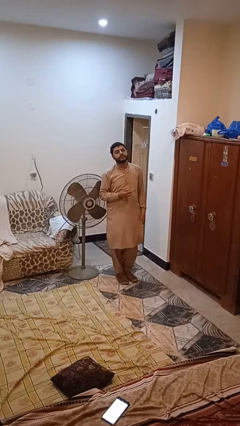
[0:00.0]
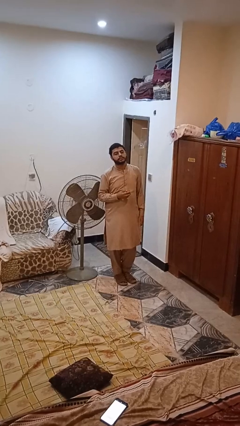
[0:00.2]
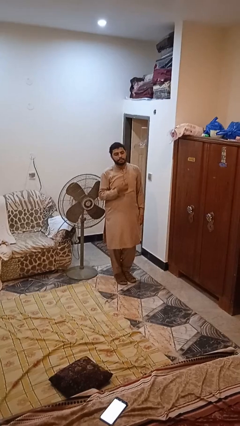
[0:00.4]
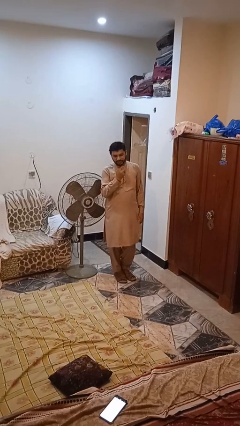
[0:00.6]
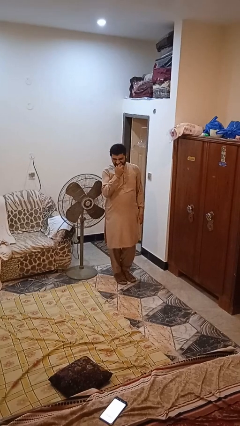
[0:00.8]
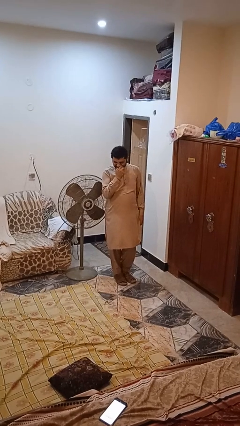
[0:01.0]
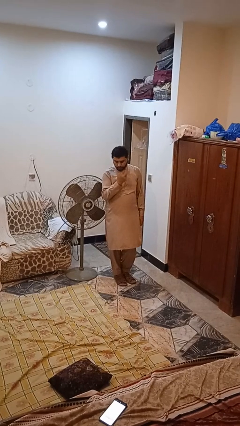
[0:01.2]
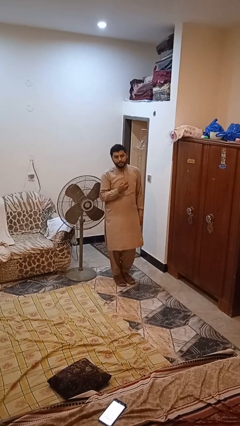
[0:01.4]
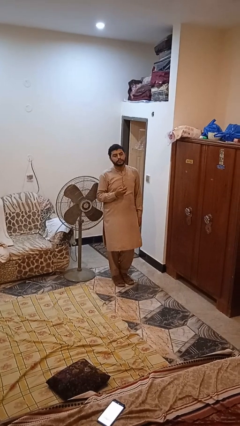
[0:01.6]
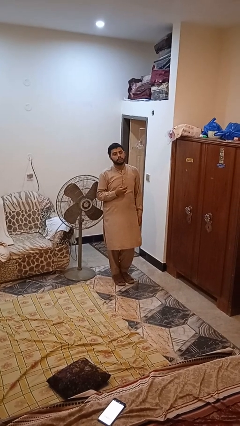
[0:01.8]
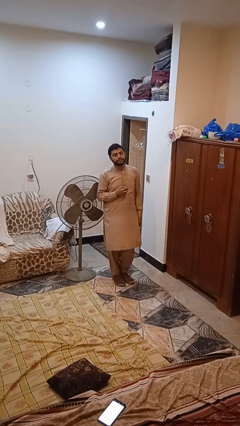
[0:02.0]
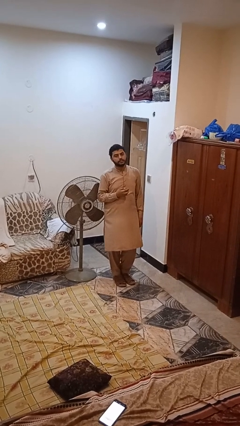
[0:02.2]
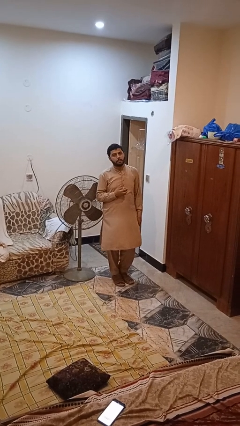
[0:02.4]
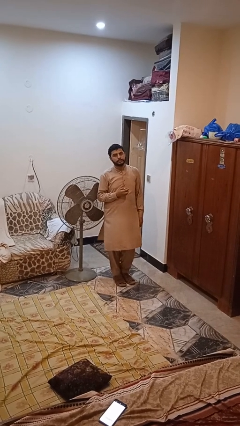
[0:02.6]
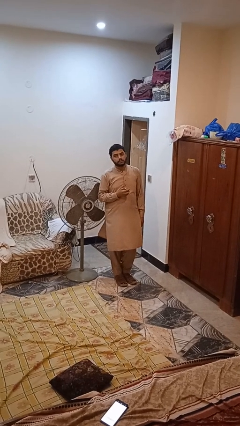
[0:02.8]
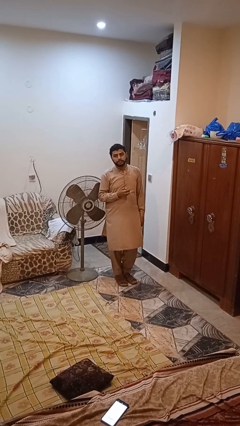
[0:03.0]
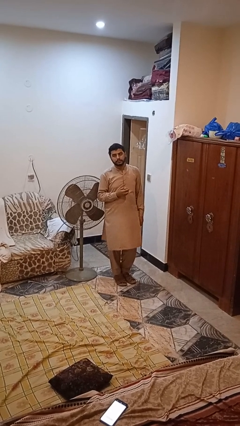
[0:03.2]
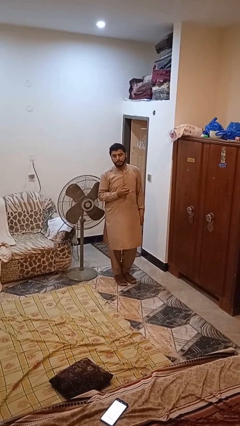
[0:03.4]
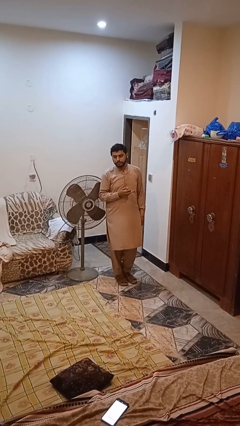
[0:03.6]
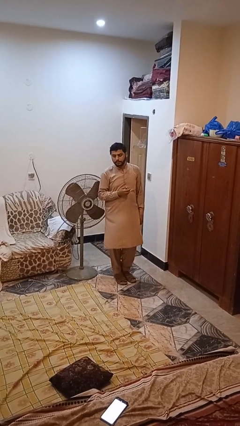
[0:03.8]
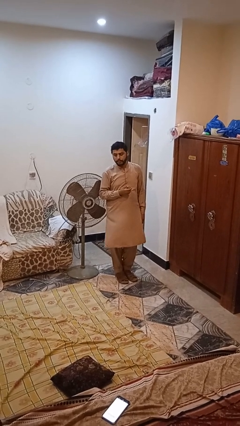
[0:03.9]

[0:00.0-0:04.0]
person eats apple

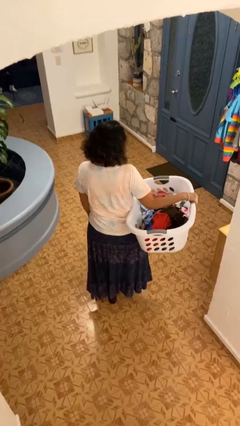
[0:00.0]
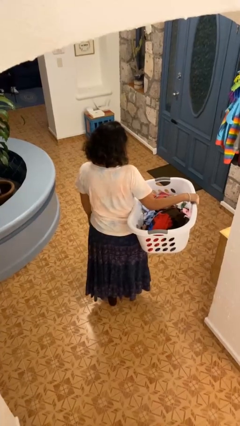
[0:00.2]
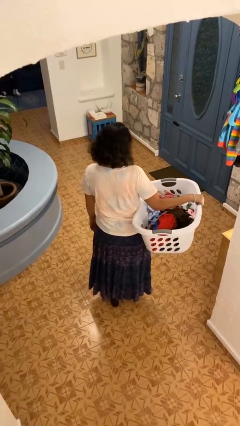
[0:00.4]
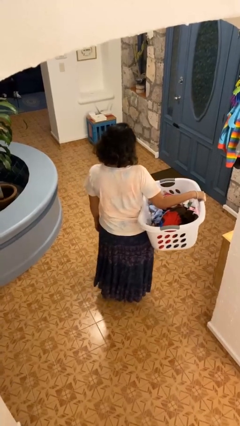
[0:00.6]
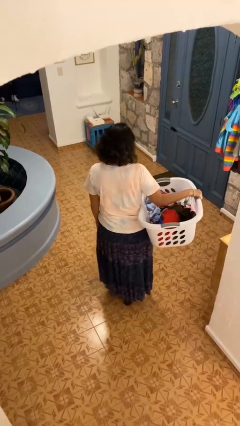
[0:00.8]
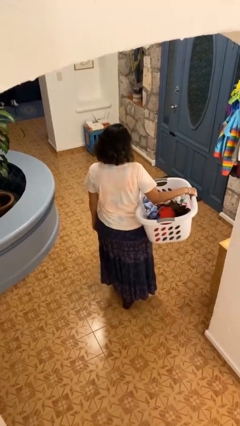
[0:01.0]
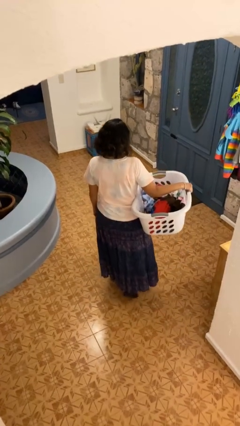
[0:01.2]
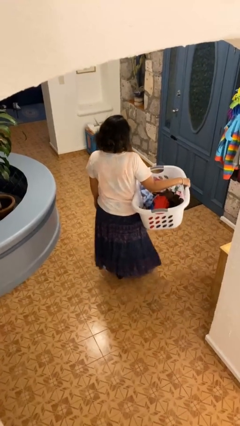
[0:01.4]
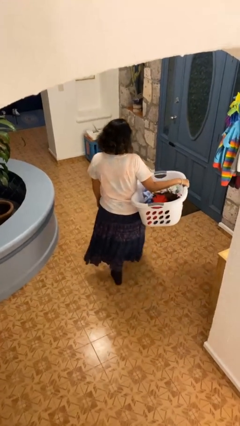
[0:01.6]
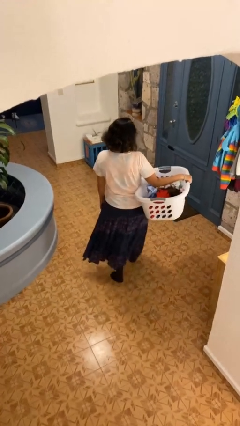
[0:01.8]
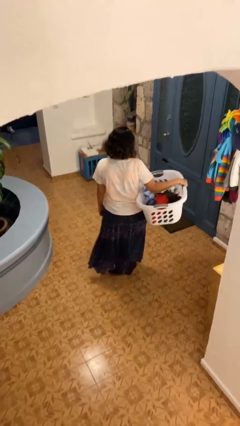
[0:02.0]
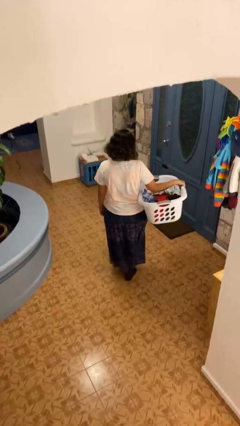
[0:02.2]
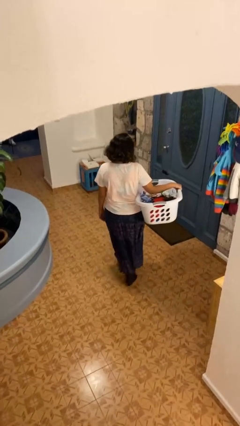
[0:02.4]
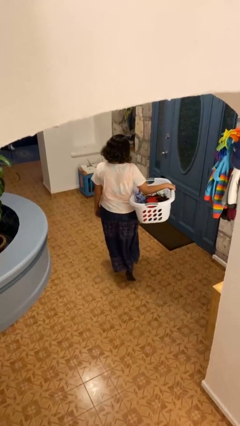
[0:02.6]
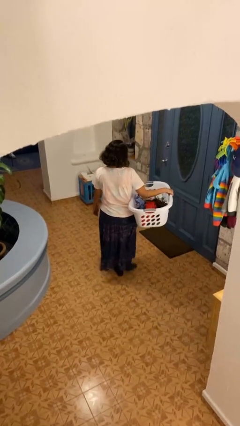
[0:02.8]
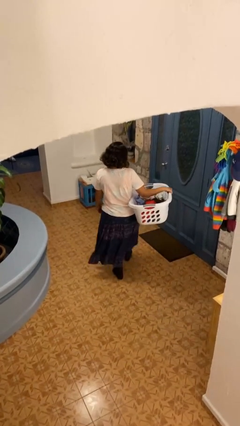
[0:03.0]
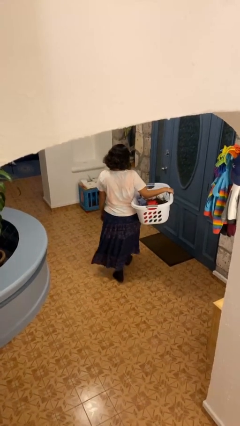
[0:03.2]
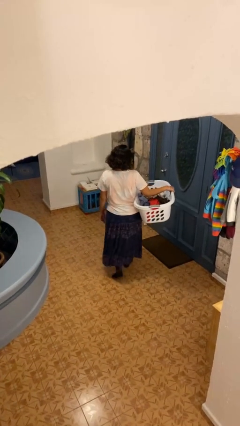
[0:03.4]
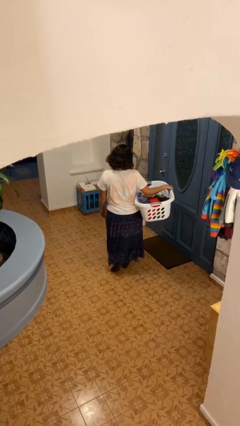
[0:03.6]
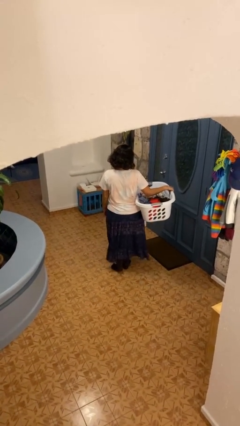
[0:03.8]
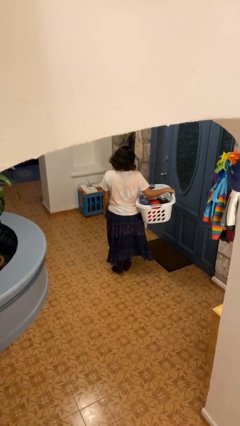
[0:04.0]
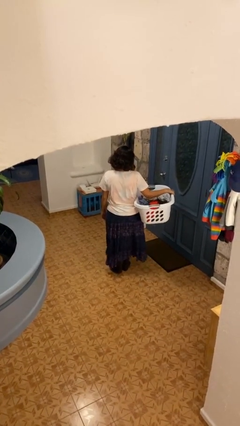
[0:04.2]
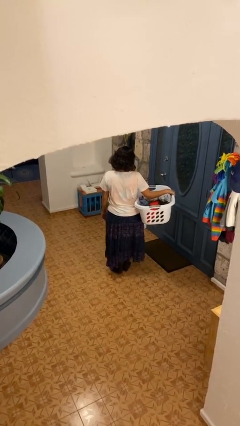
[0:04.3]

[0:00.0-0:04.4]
person carries laundry basket

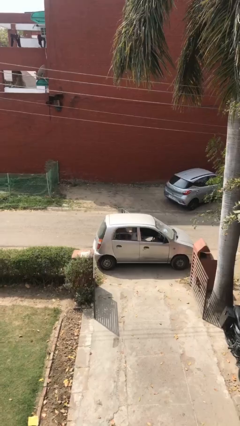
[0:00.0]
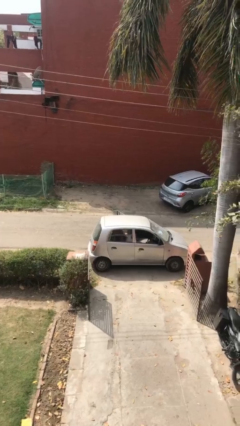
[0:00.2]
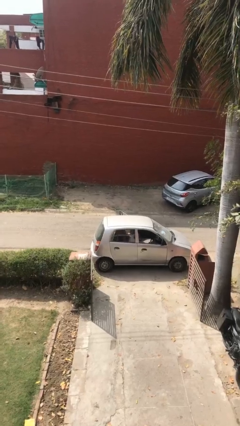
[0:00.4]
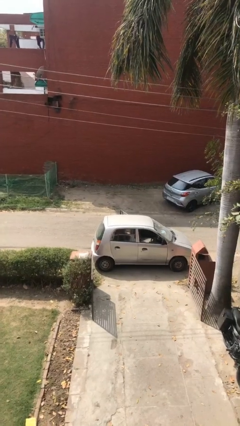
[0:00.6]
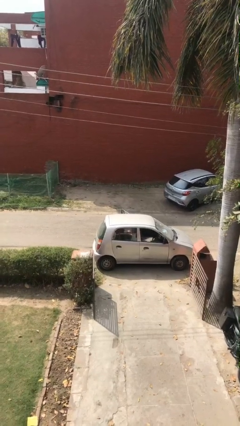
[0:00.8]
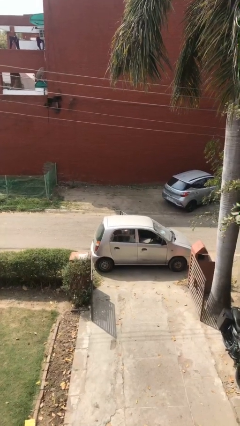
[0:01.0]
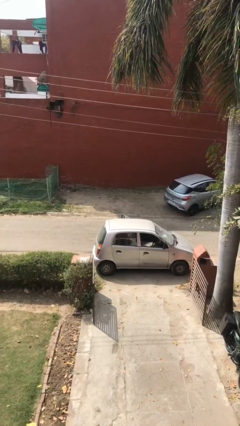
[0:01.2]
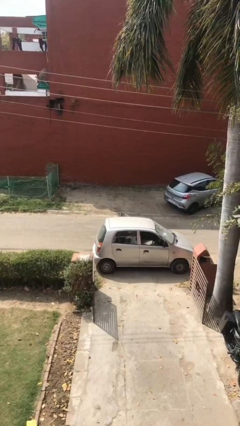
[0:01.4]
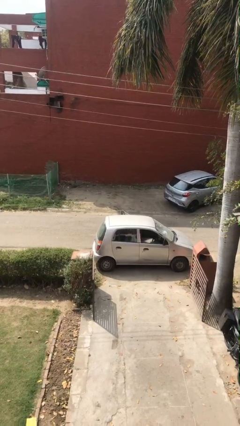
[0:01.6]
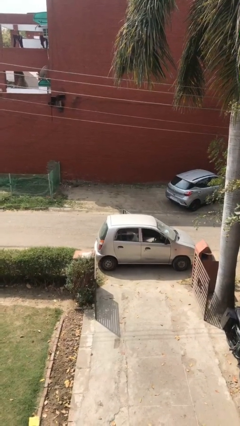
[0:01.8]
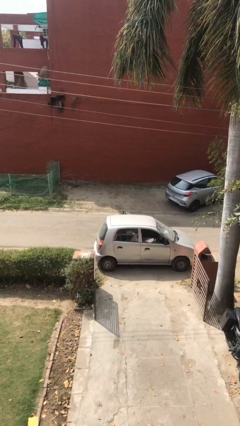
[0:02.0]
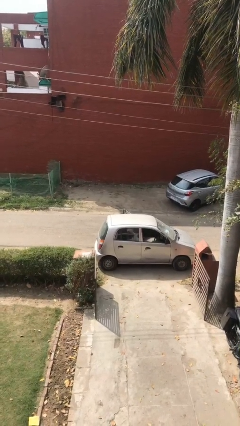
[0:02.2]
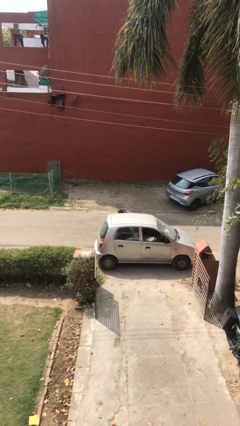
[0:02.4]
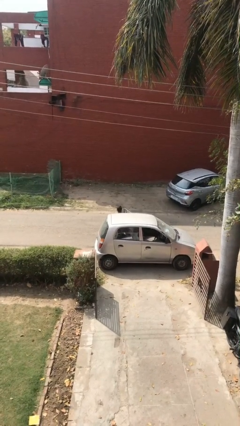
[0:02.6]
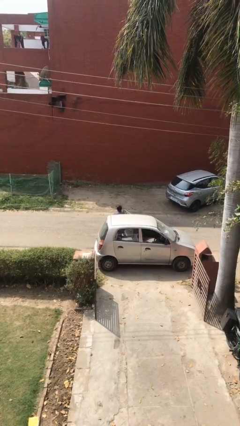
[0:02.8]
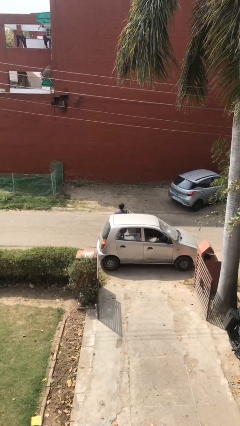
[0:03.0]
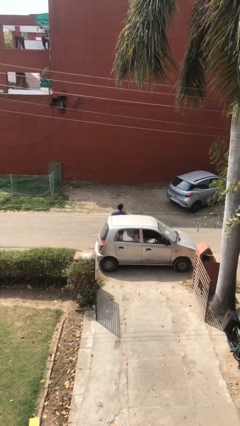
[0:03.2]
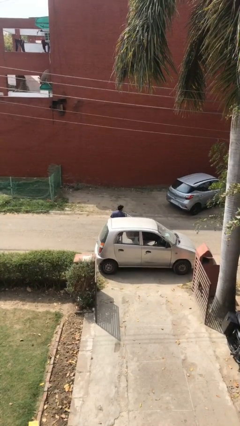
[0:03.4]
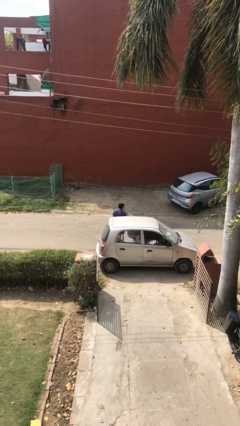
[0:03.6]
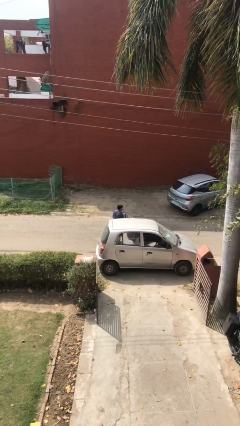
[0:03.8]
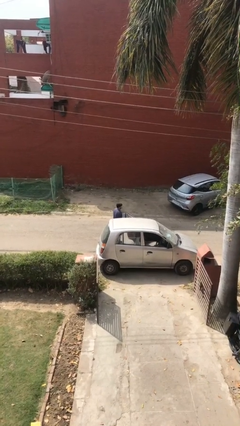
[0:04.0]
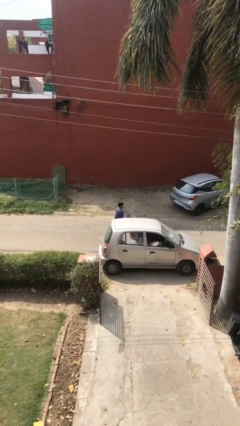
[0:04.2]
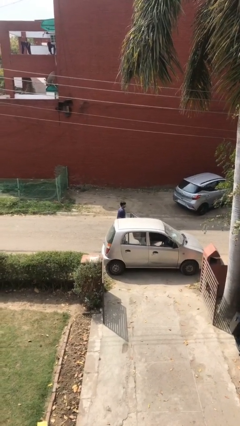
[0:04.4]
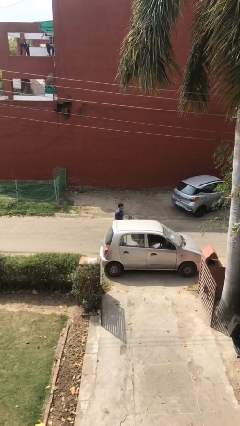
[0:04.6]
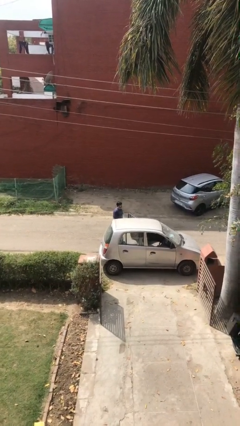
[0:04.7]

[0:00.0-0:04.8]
person exits car

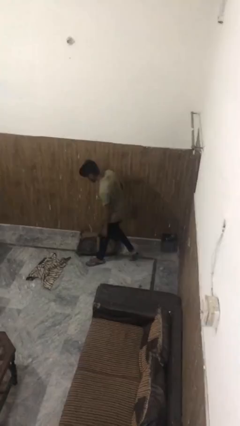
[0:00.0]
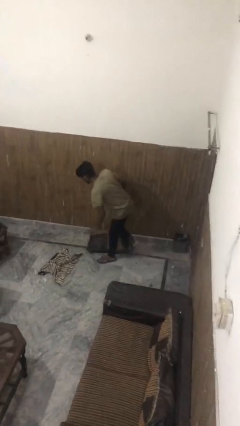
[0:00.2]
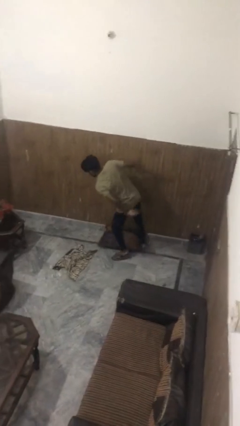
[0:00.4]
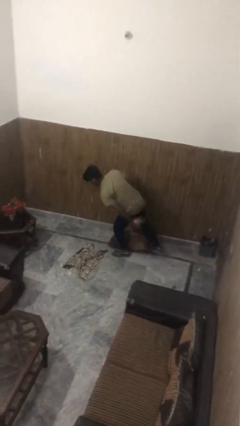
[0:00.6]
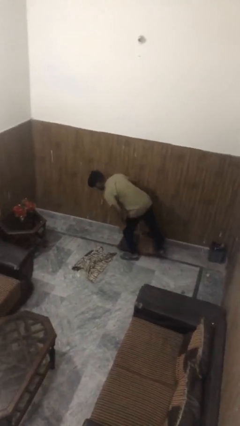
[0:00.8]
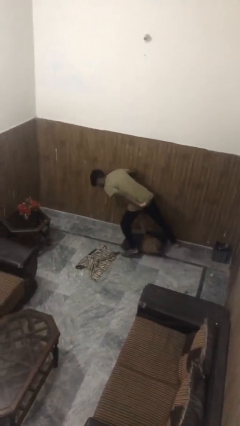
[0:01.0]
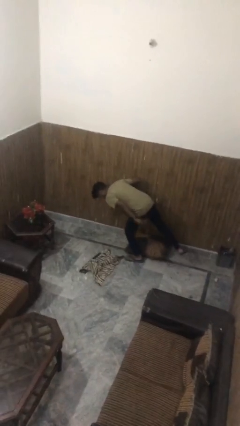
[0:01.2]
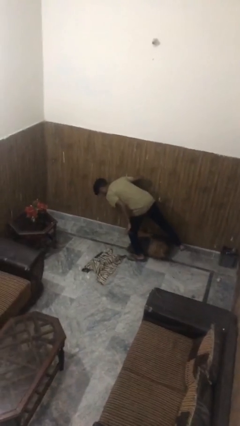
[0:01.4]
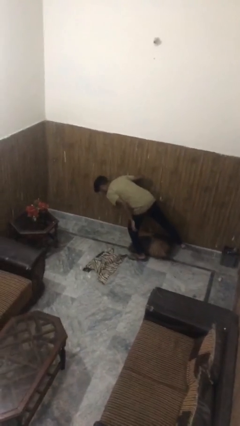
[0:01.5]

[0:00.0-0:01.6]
person trips on object on floor

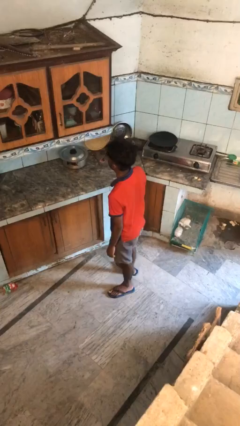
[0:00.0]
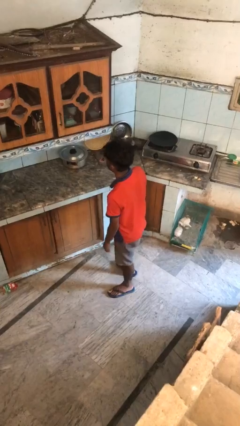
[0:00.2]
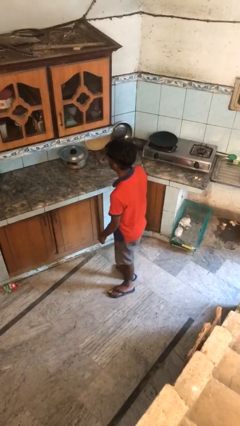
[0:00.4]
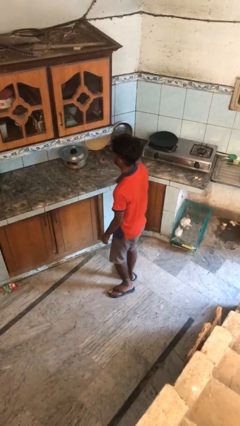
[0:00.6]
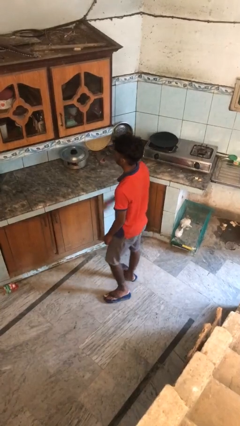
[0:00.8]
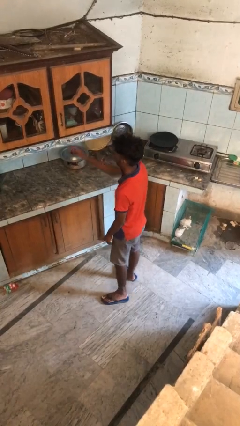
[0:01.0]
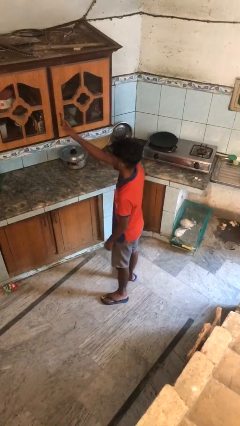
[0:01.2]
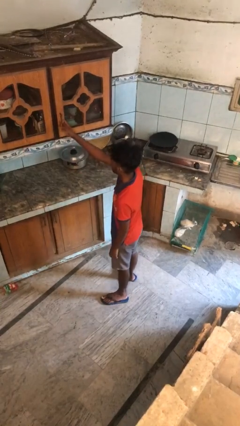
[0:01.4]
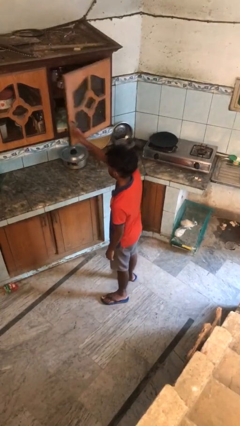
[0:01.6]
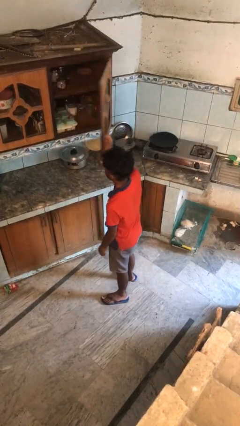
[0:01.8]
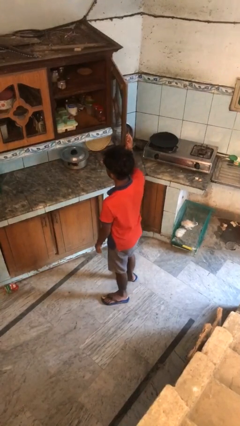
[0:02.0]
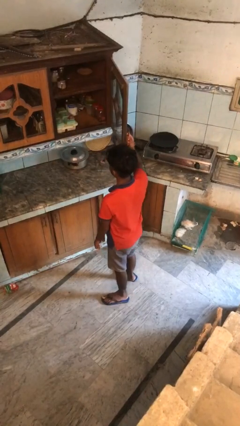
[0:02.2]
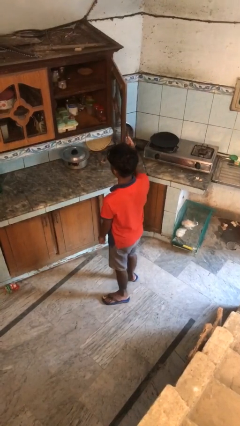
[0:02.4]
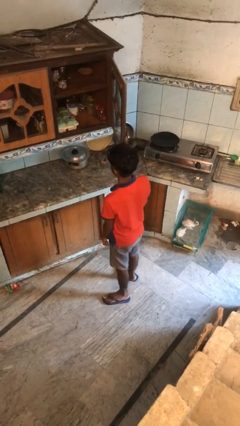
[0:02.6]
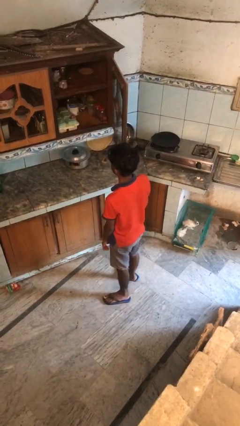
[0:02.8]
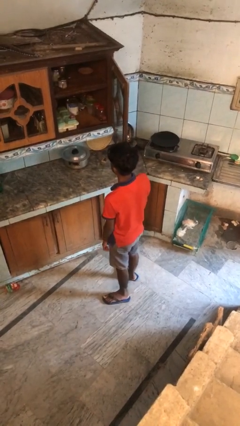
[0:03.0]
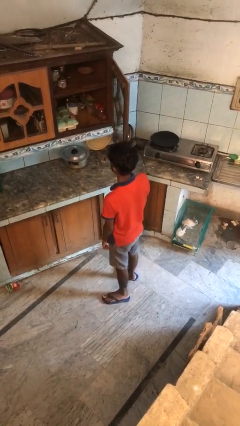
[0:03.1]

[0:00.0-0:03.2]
person opens cabinet
